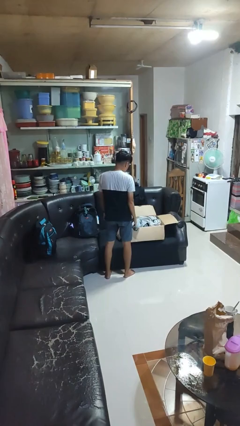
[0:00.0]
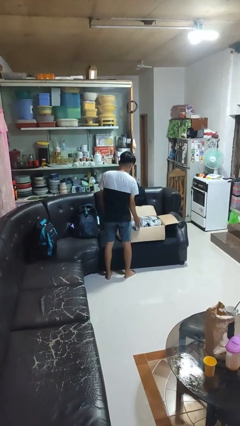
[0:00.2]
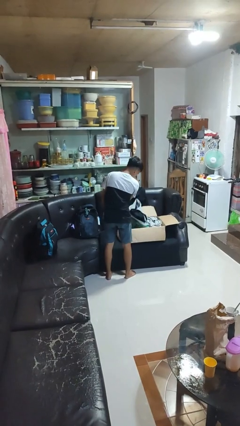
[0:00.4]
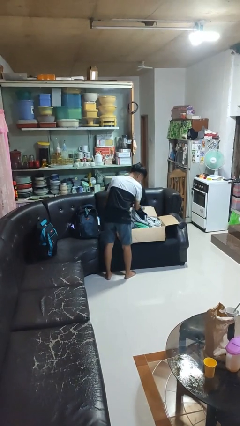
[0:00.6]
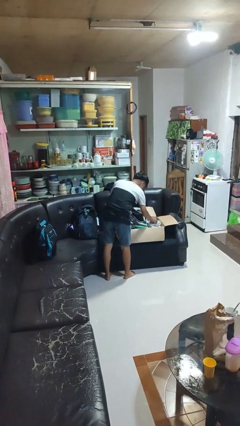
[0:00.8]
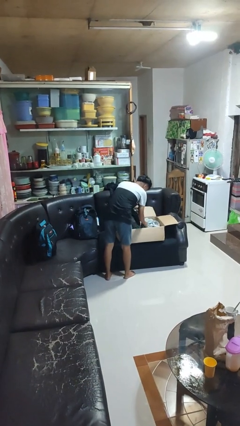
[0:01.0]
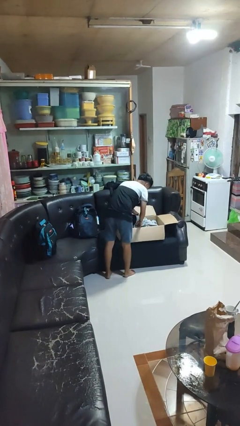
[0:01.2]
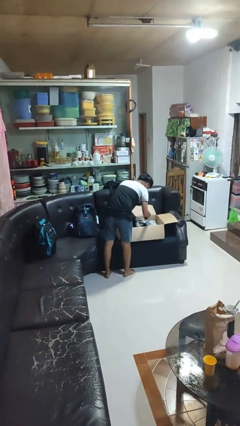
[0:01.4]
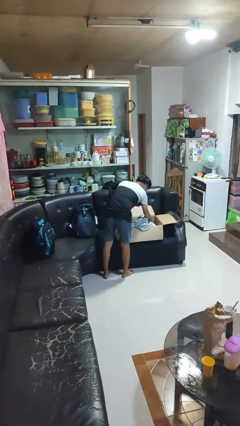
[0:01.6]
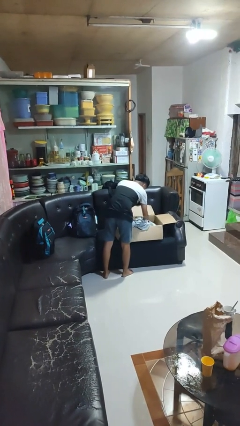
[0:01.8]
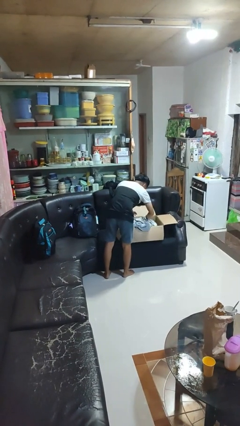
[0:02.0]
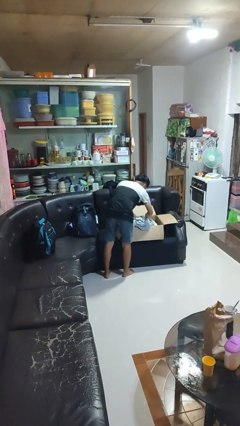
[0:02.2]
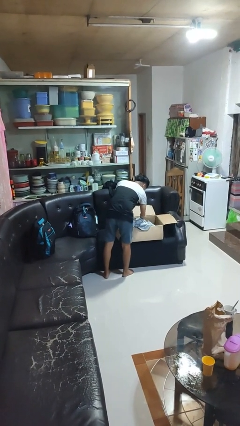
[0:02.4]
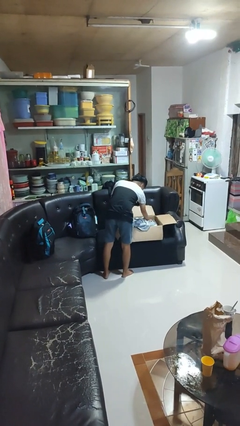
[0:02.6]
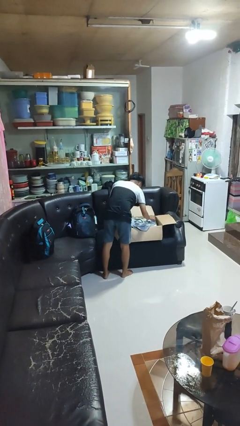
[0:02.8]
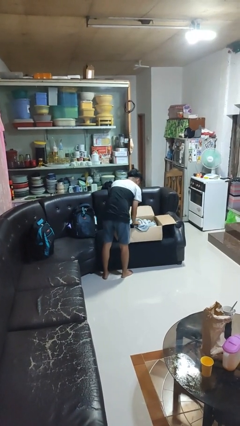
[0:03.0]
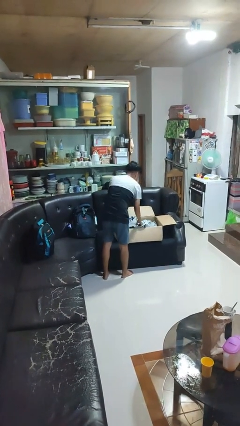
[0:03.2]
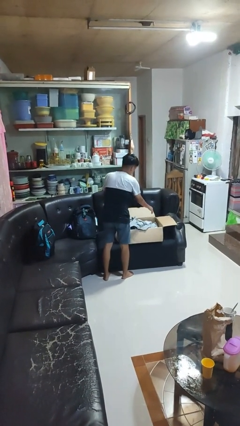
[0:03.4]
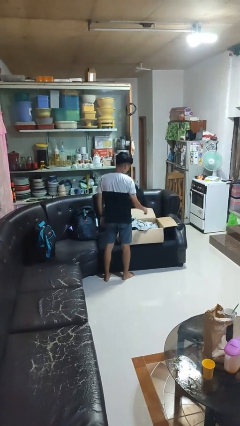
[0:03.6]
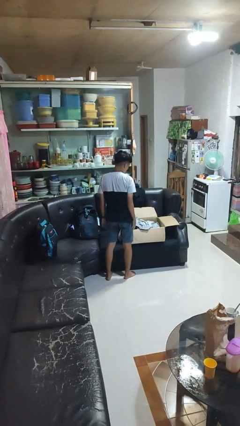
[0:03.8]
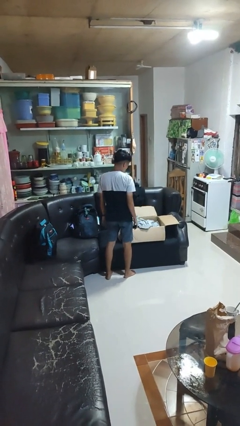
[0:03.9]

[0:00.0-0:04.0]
person searches in box

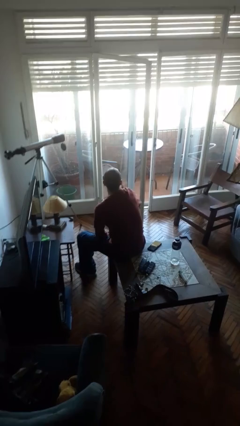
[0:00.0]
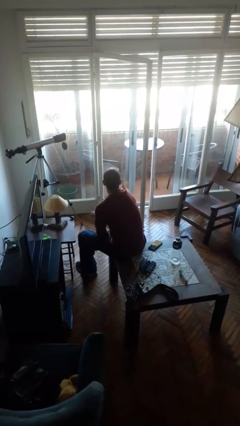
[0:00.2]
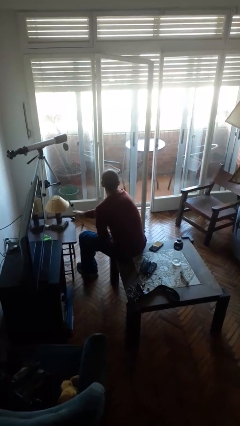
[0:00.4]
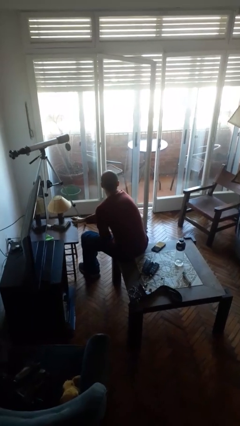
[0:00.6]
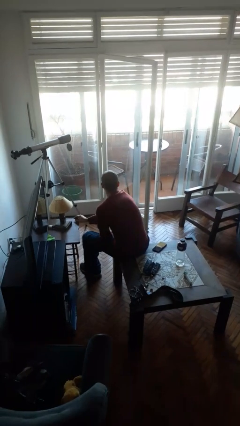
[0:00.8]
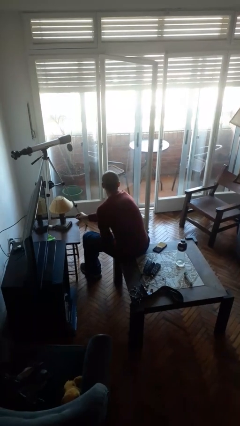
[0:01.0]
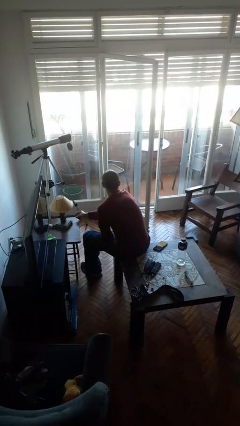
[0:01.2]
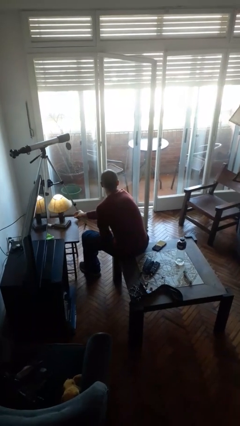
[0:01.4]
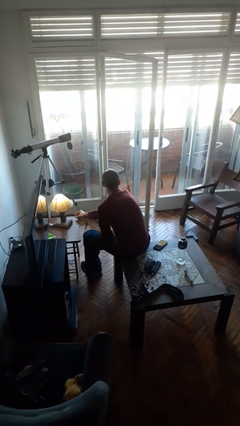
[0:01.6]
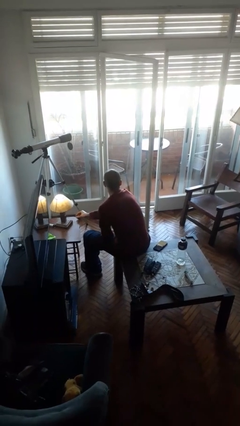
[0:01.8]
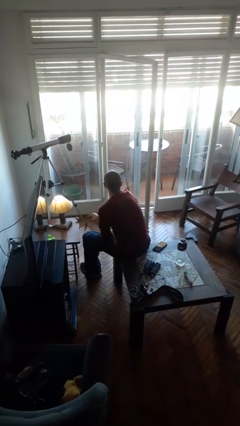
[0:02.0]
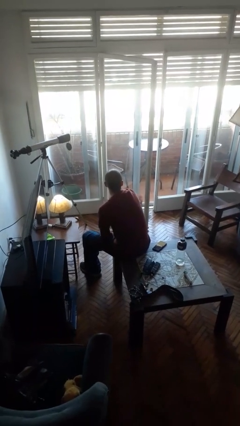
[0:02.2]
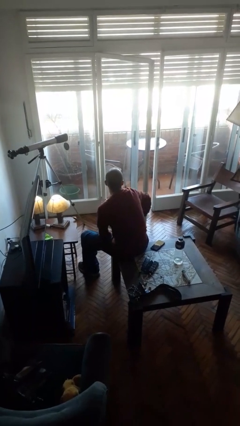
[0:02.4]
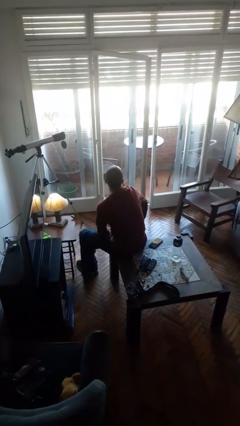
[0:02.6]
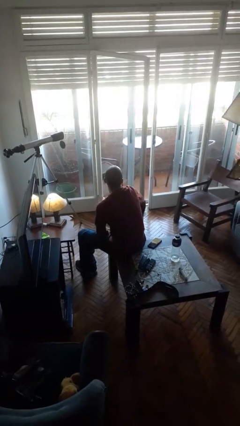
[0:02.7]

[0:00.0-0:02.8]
person turns on lamp

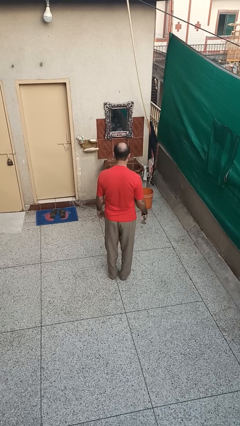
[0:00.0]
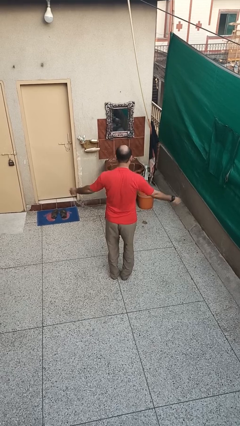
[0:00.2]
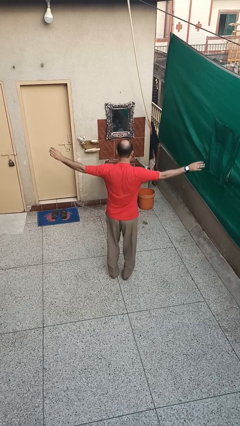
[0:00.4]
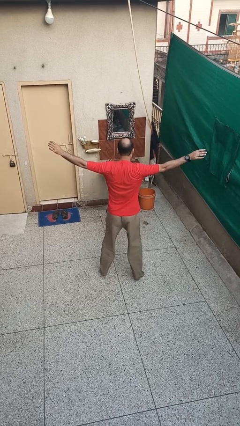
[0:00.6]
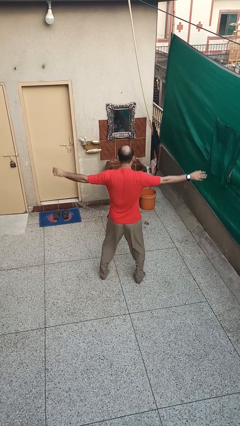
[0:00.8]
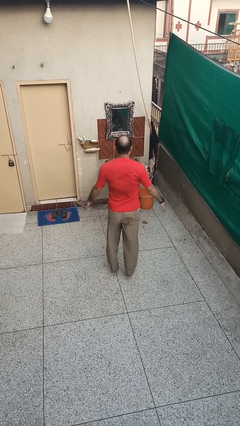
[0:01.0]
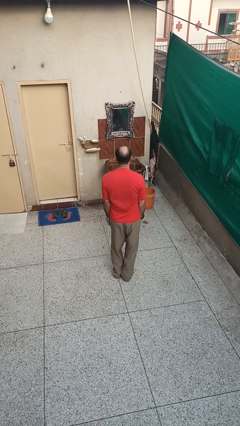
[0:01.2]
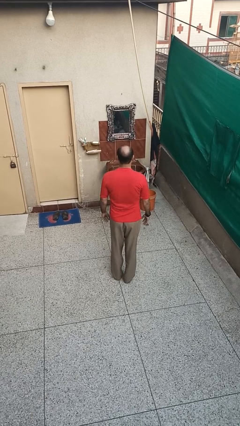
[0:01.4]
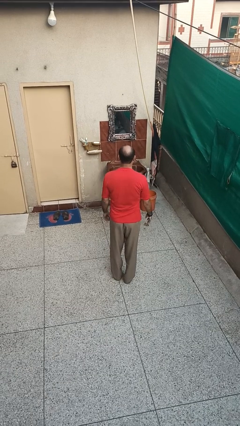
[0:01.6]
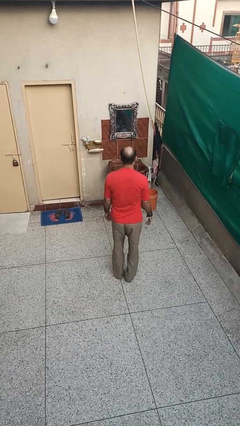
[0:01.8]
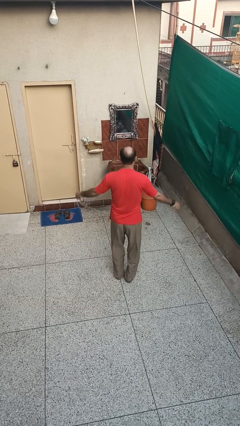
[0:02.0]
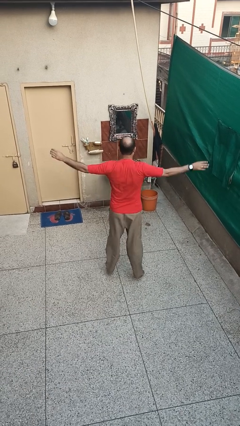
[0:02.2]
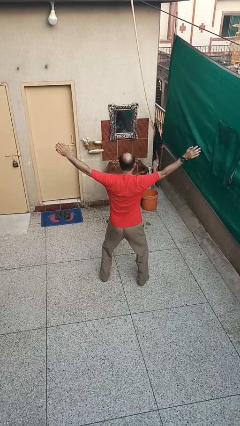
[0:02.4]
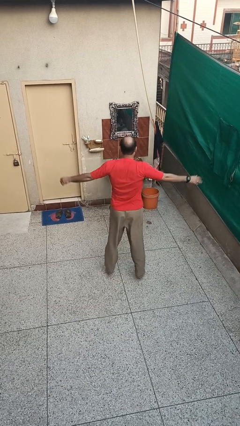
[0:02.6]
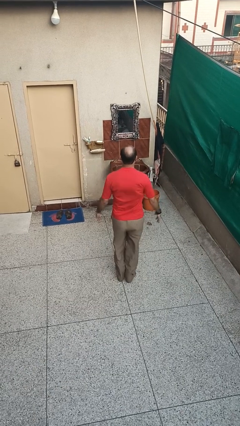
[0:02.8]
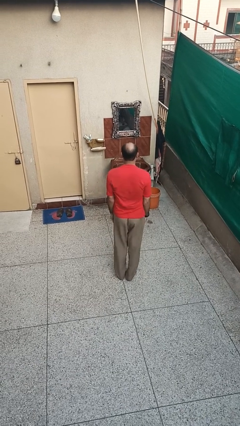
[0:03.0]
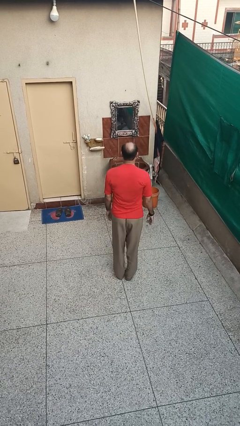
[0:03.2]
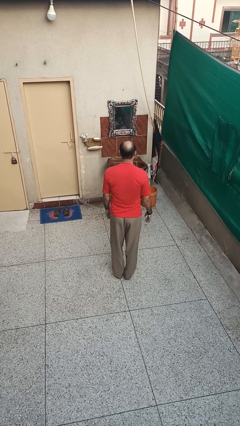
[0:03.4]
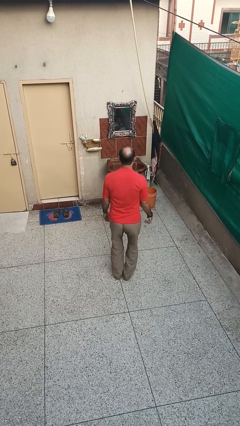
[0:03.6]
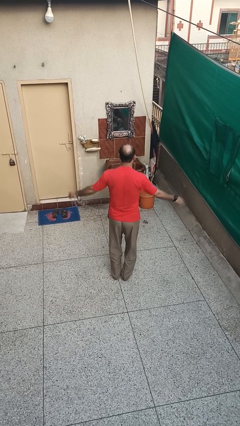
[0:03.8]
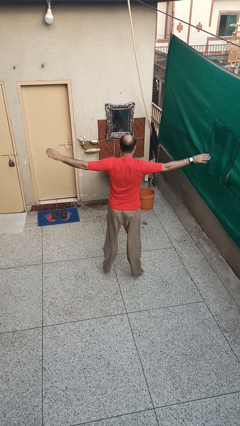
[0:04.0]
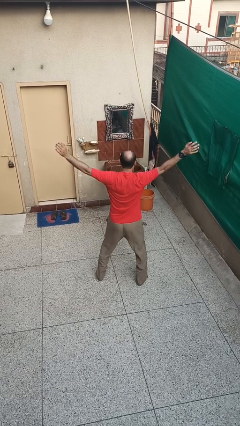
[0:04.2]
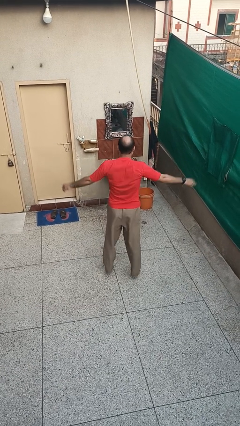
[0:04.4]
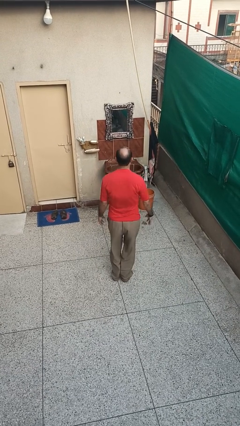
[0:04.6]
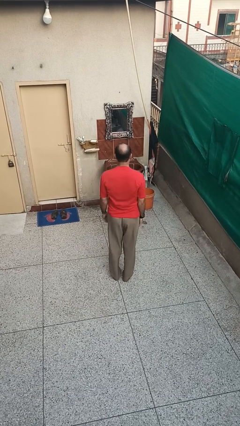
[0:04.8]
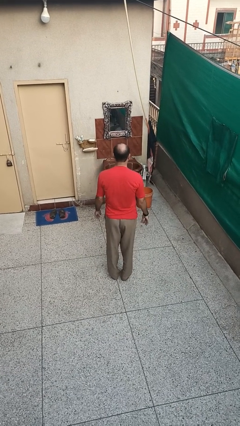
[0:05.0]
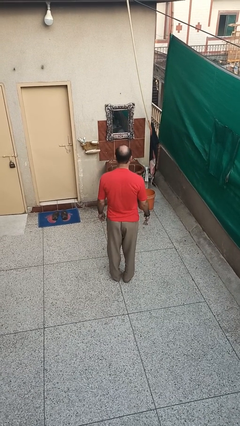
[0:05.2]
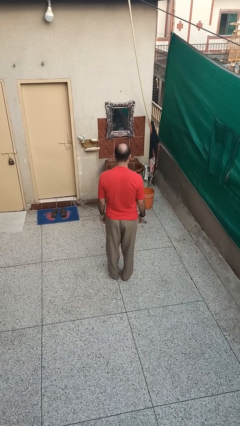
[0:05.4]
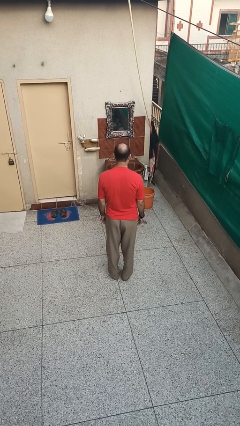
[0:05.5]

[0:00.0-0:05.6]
person exercises with jumping jacks

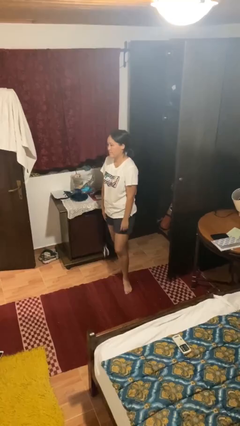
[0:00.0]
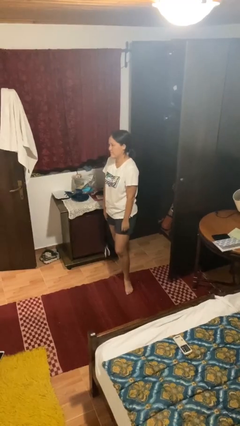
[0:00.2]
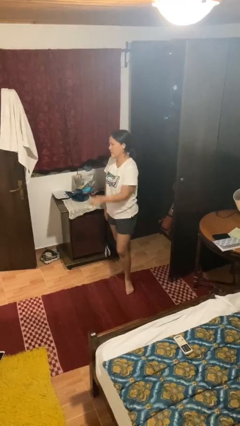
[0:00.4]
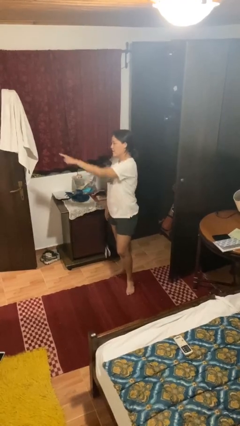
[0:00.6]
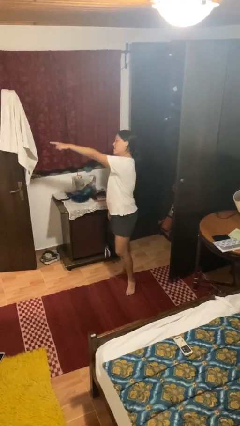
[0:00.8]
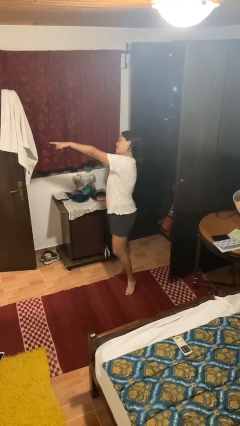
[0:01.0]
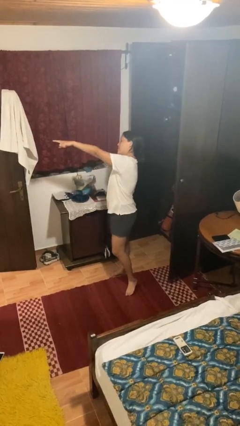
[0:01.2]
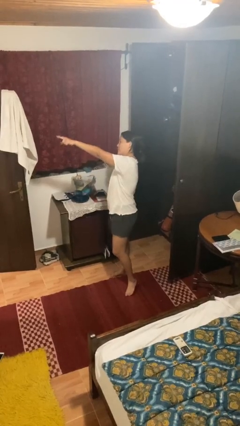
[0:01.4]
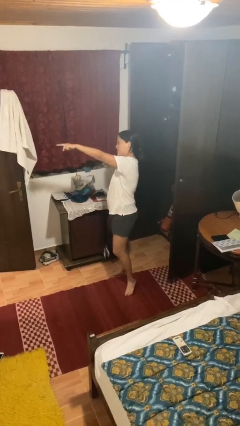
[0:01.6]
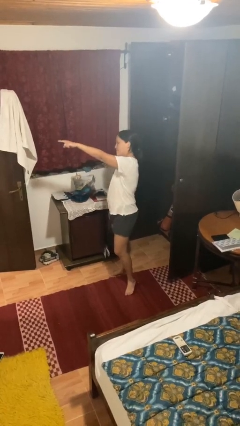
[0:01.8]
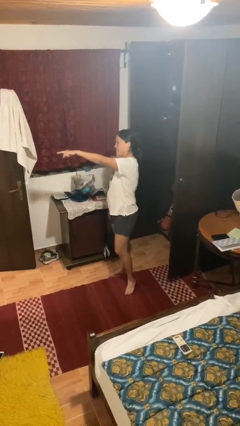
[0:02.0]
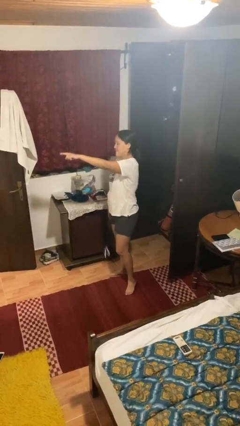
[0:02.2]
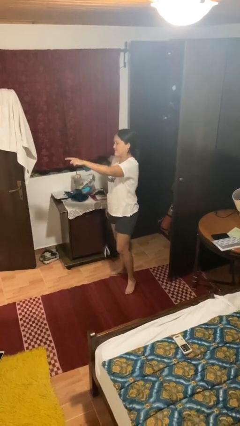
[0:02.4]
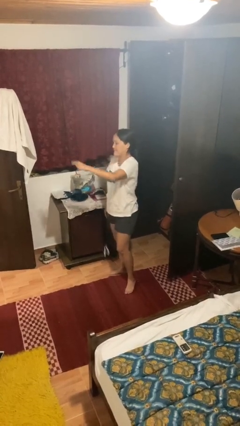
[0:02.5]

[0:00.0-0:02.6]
person points at person

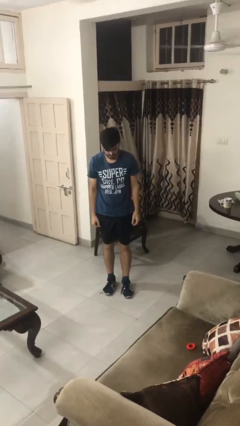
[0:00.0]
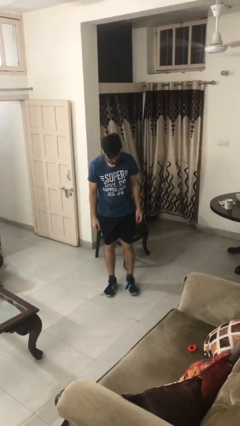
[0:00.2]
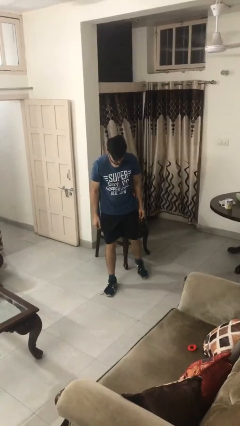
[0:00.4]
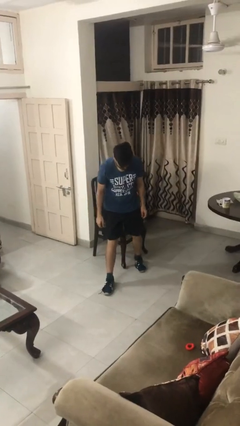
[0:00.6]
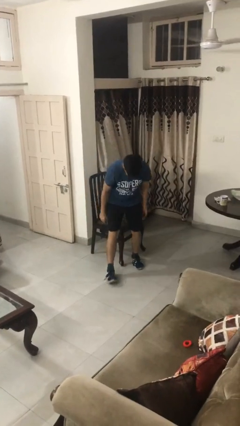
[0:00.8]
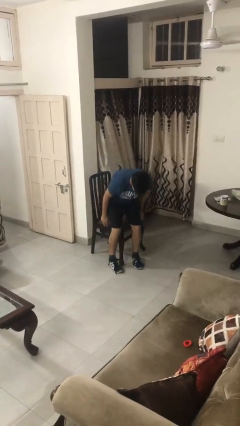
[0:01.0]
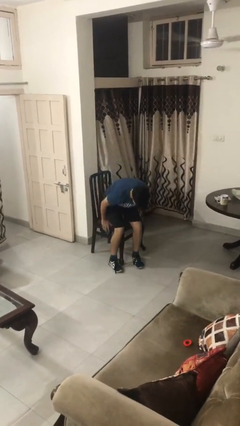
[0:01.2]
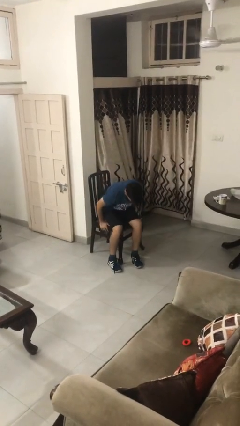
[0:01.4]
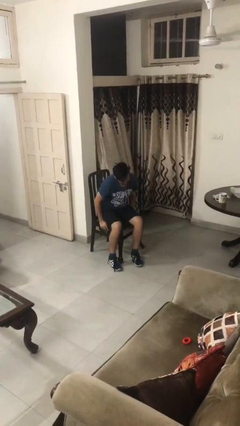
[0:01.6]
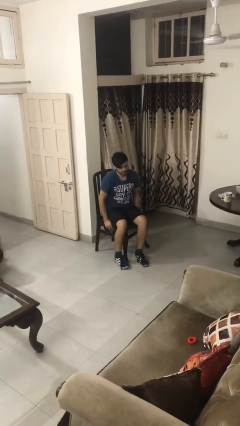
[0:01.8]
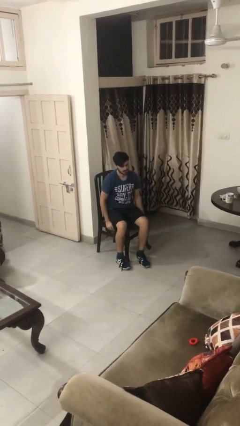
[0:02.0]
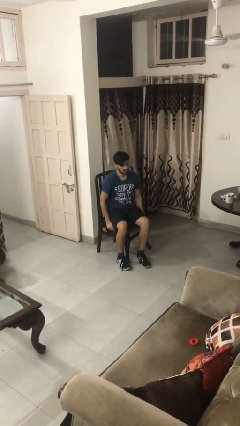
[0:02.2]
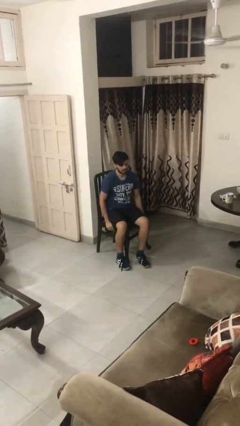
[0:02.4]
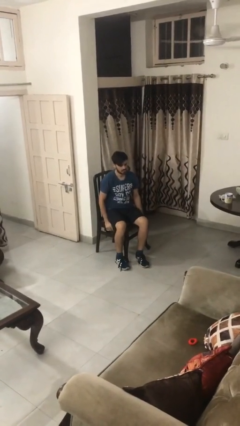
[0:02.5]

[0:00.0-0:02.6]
person sits down

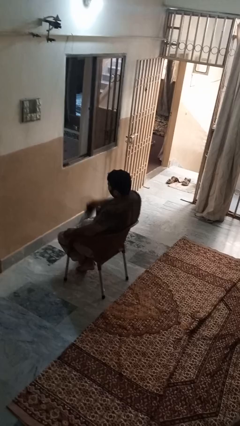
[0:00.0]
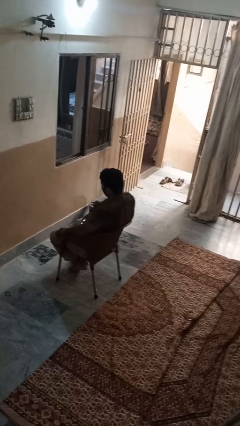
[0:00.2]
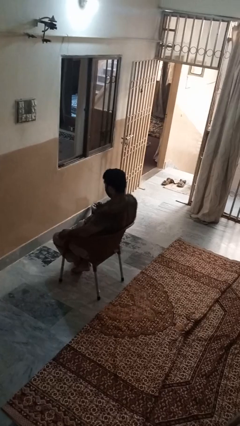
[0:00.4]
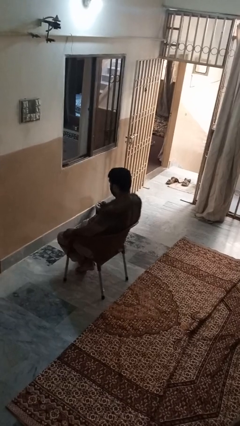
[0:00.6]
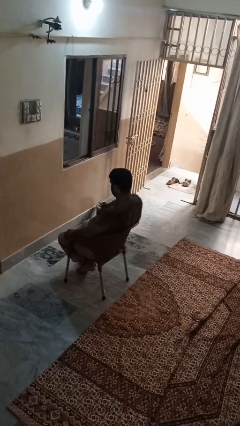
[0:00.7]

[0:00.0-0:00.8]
person takes selfie
